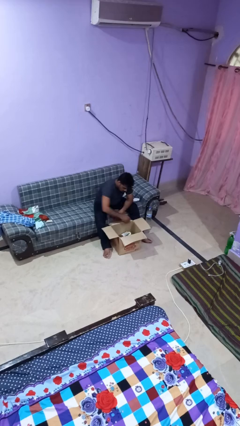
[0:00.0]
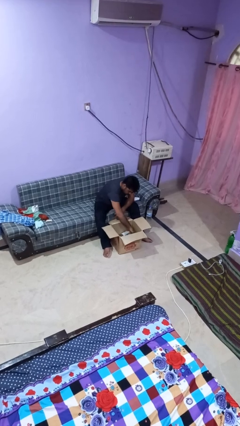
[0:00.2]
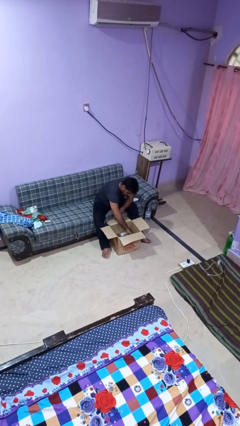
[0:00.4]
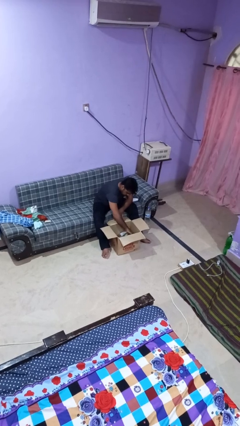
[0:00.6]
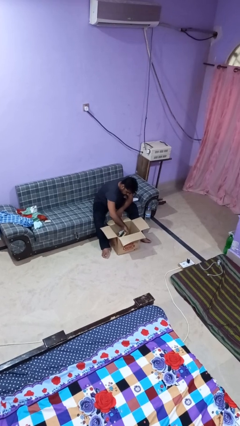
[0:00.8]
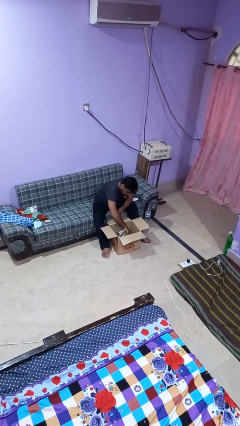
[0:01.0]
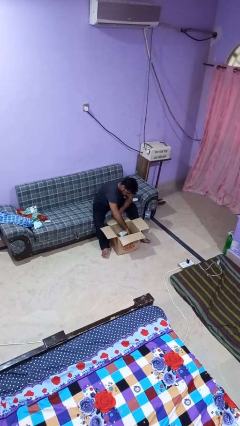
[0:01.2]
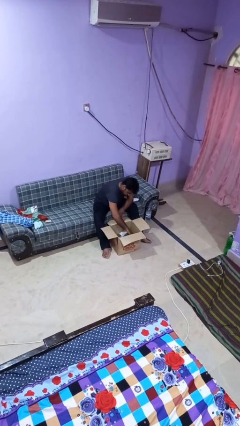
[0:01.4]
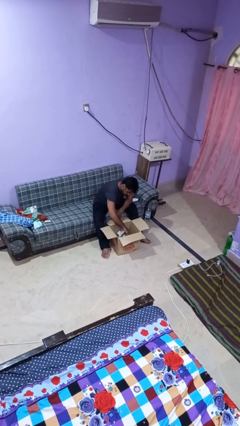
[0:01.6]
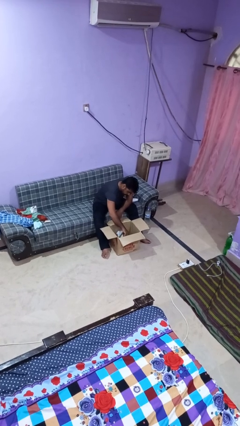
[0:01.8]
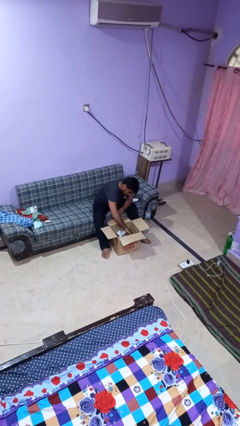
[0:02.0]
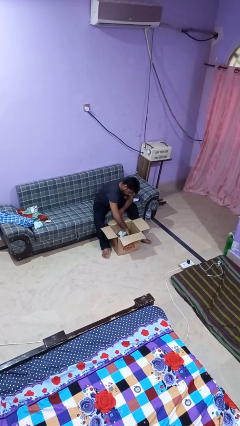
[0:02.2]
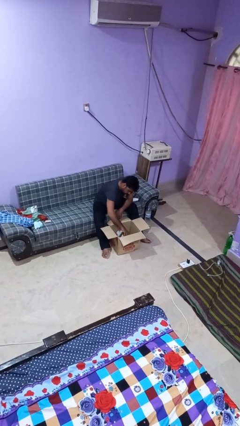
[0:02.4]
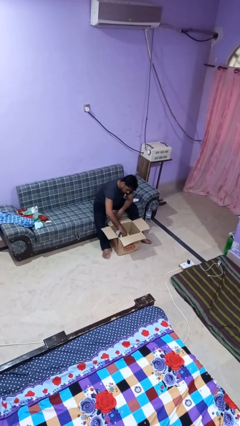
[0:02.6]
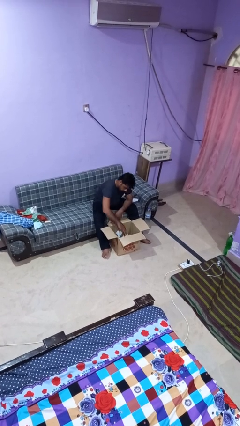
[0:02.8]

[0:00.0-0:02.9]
person searches in box

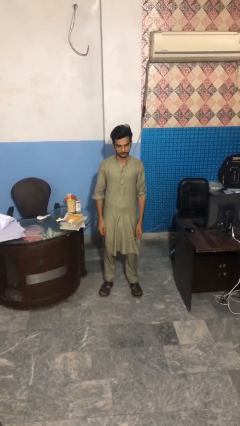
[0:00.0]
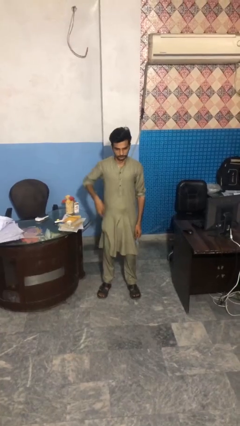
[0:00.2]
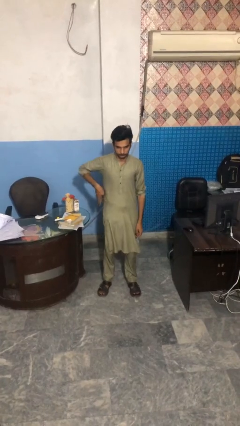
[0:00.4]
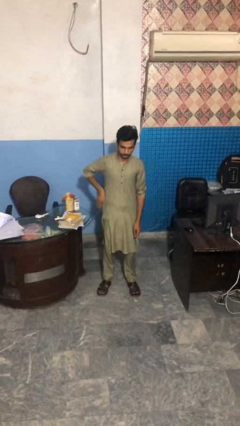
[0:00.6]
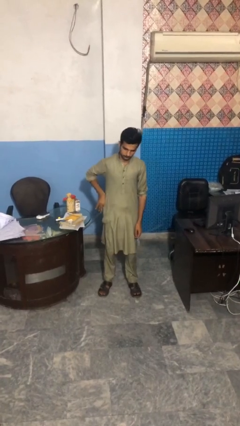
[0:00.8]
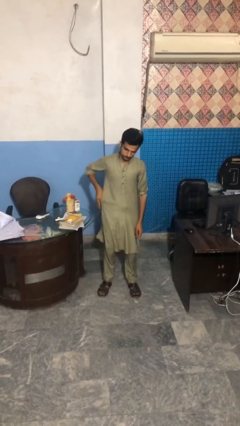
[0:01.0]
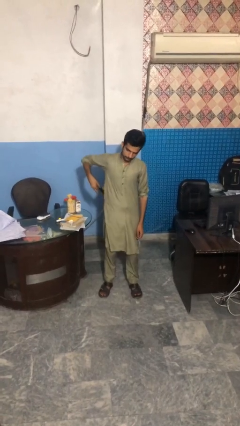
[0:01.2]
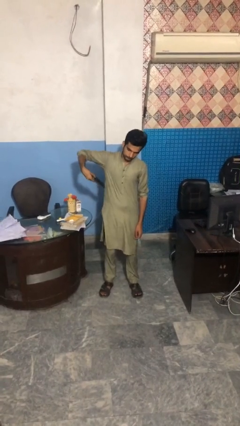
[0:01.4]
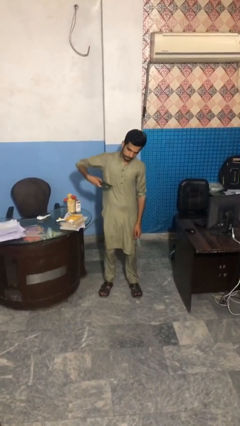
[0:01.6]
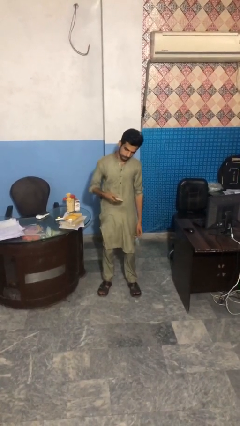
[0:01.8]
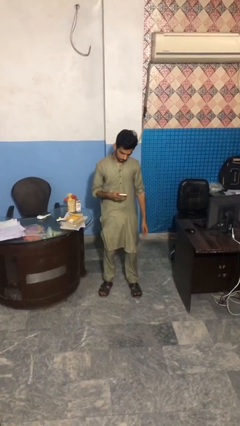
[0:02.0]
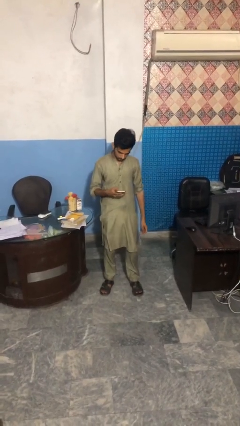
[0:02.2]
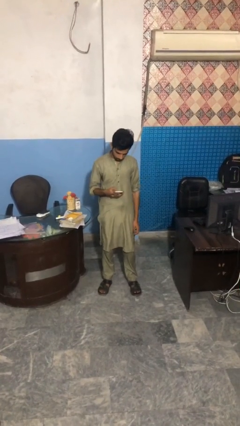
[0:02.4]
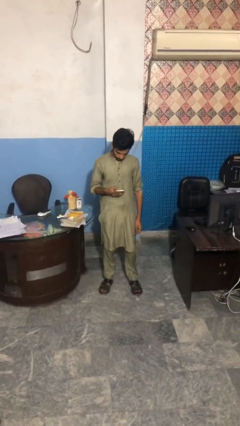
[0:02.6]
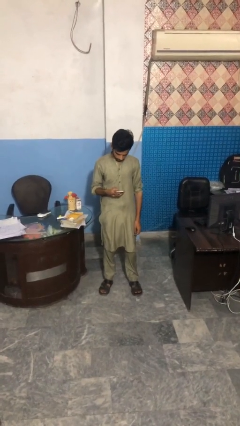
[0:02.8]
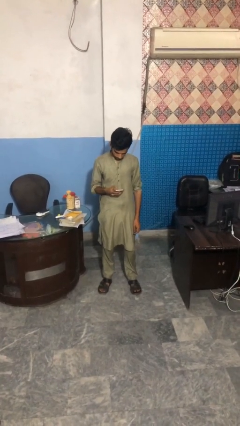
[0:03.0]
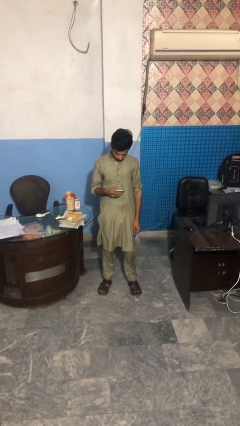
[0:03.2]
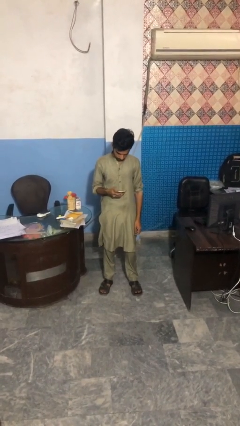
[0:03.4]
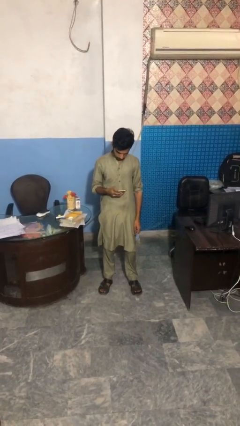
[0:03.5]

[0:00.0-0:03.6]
person takes phone from pocket

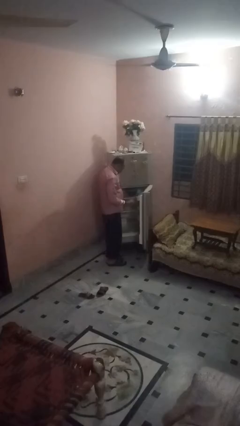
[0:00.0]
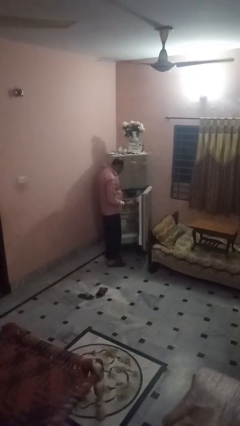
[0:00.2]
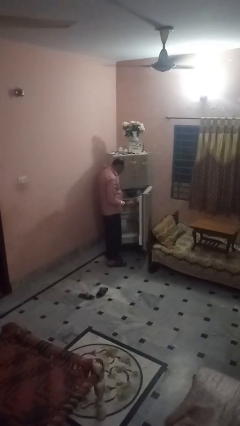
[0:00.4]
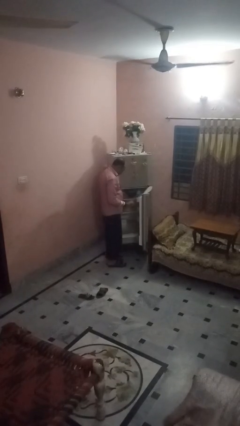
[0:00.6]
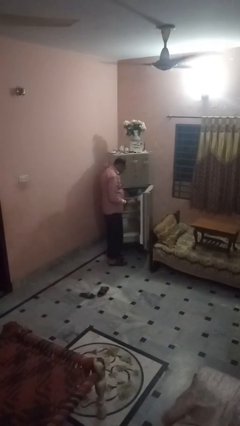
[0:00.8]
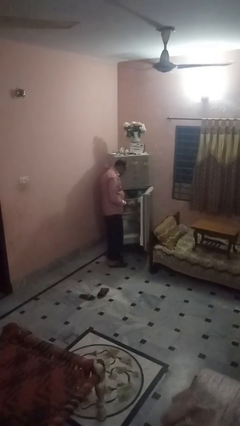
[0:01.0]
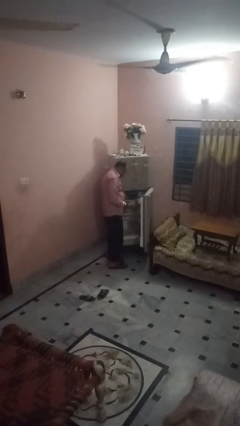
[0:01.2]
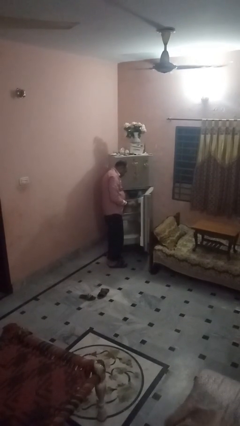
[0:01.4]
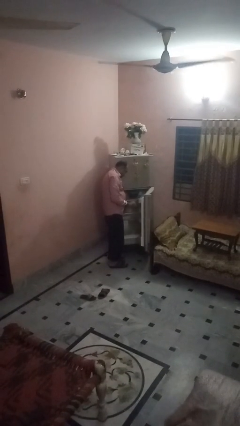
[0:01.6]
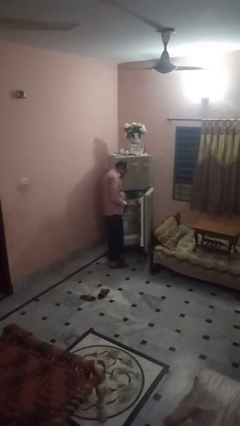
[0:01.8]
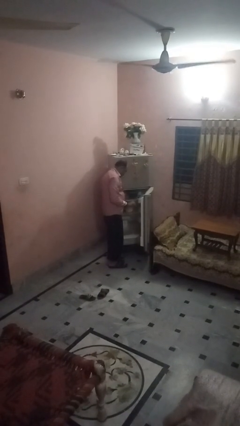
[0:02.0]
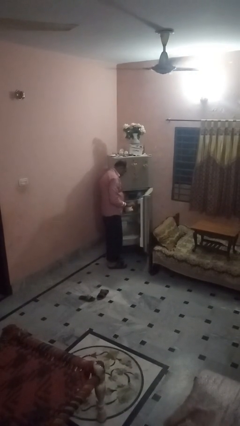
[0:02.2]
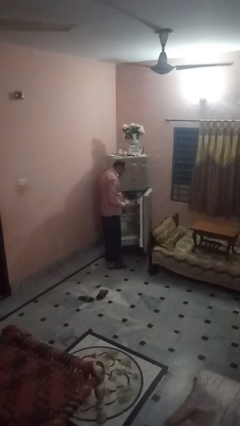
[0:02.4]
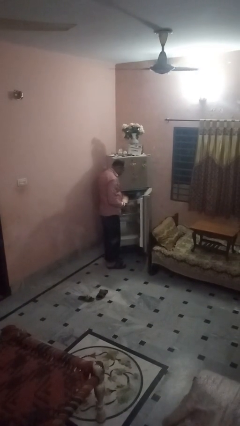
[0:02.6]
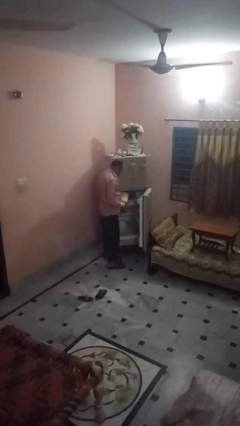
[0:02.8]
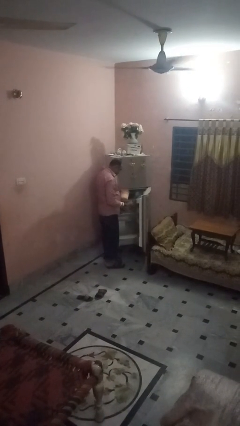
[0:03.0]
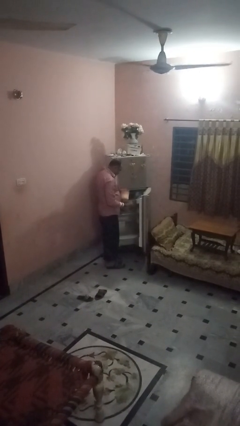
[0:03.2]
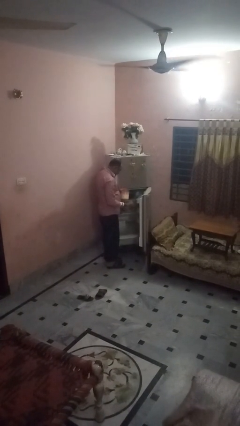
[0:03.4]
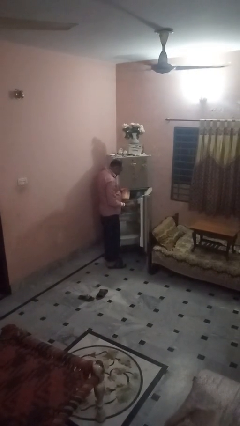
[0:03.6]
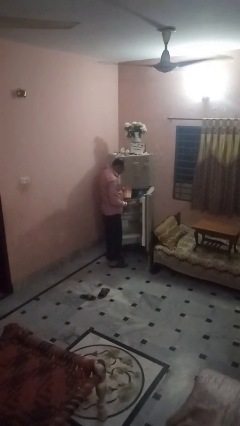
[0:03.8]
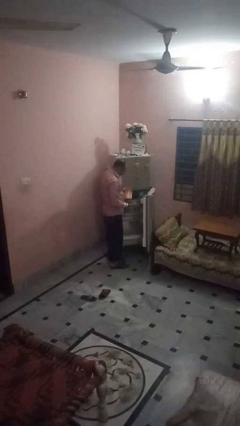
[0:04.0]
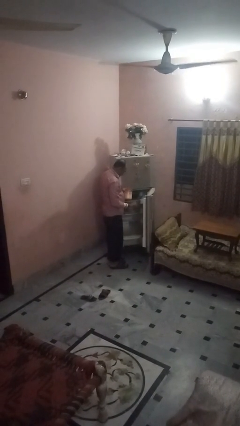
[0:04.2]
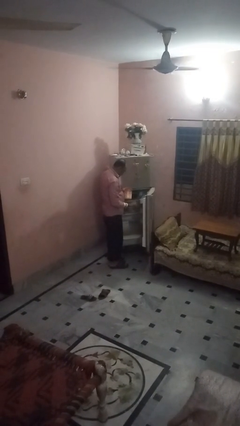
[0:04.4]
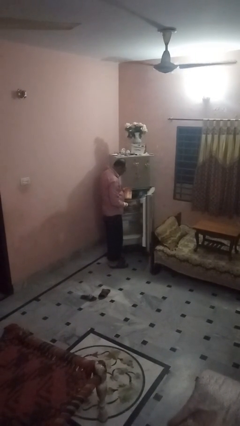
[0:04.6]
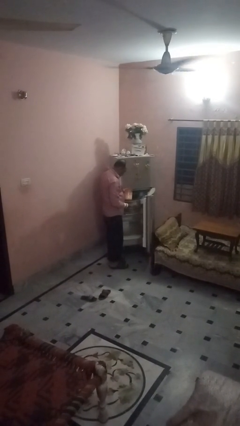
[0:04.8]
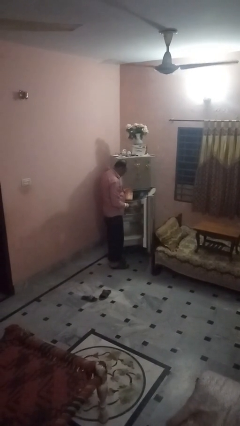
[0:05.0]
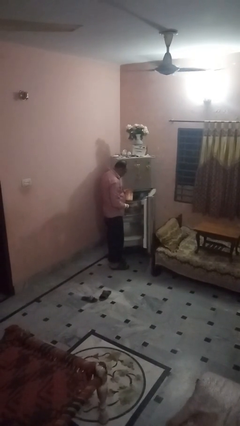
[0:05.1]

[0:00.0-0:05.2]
person puts object into refrigerator

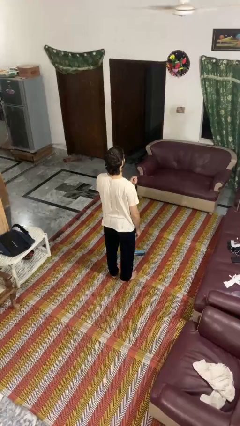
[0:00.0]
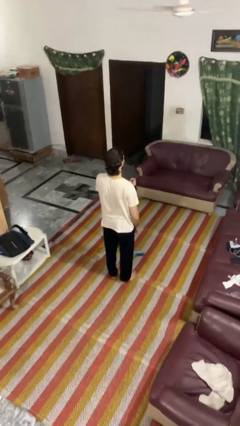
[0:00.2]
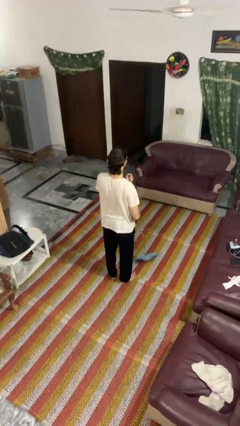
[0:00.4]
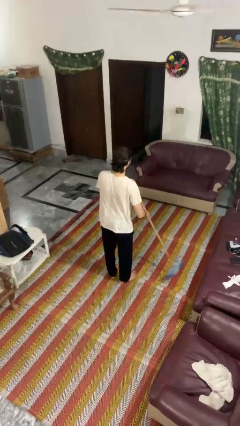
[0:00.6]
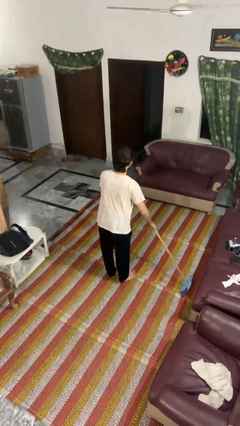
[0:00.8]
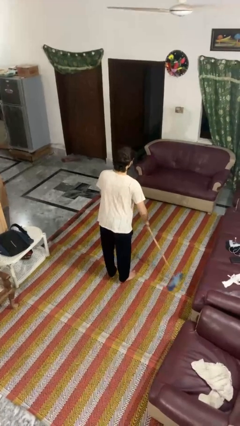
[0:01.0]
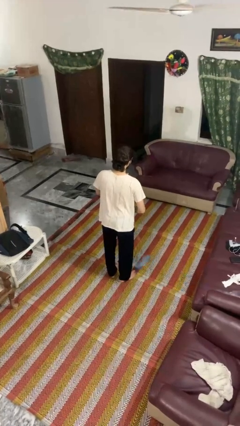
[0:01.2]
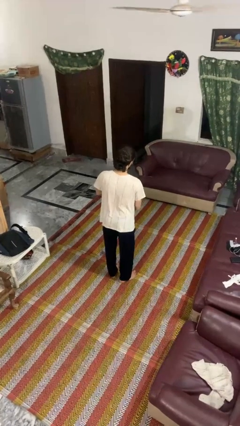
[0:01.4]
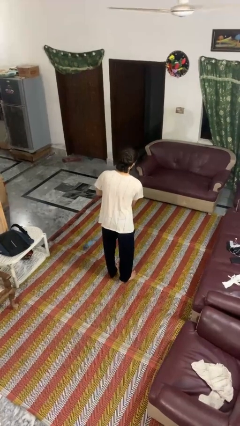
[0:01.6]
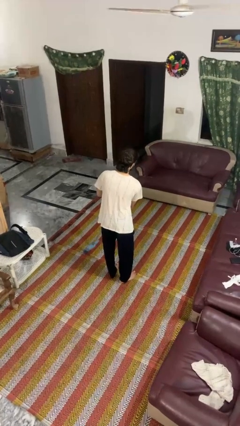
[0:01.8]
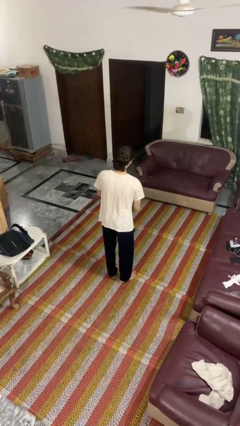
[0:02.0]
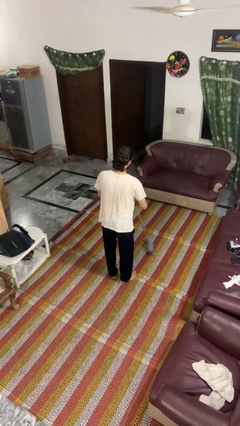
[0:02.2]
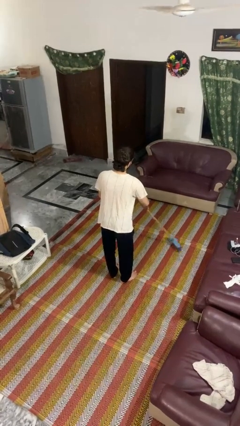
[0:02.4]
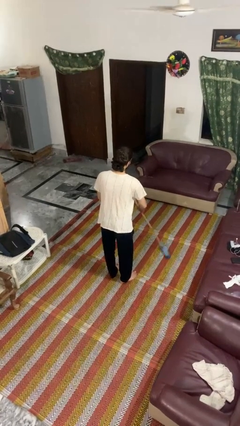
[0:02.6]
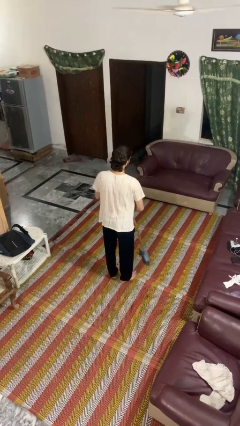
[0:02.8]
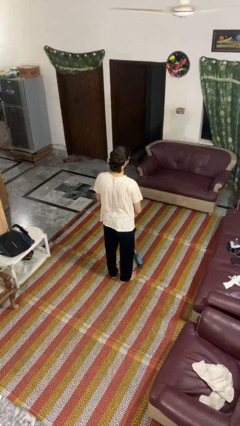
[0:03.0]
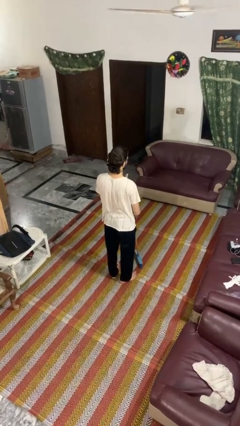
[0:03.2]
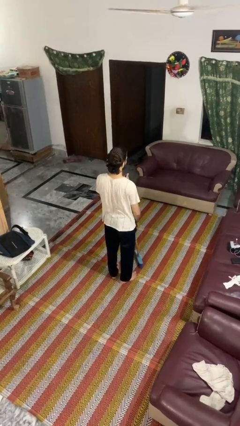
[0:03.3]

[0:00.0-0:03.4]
person sweeps floor

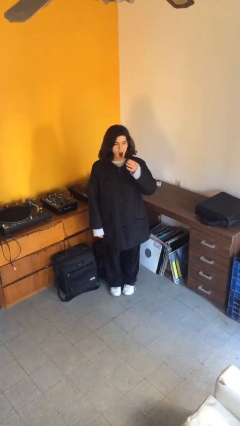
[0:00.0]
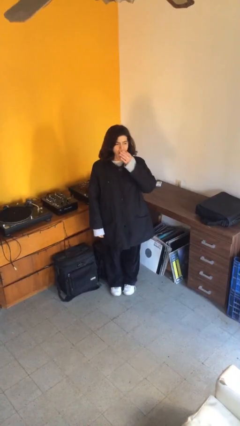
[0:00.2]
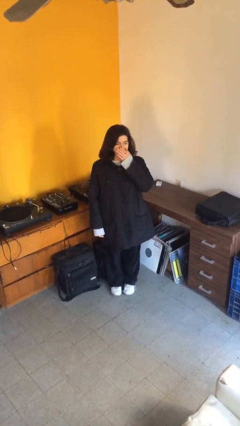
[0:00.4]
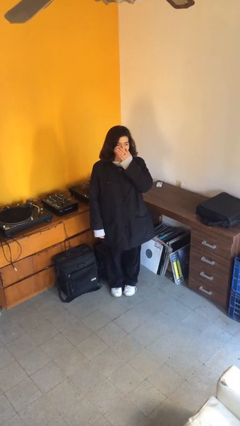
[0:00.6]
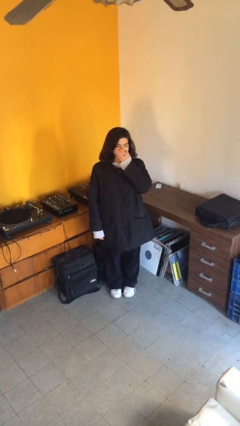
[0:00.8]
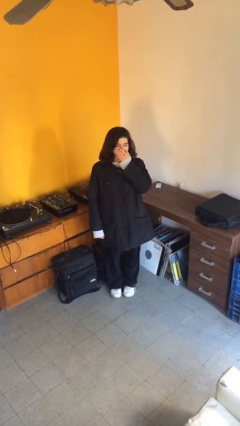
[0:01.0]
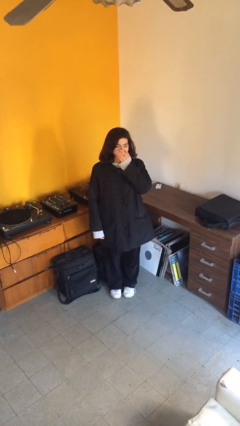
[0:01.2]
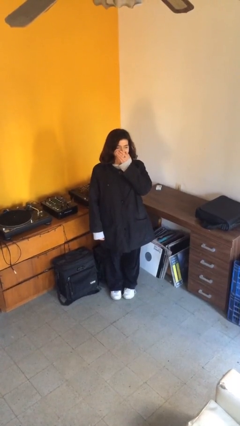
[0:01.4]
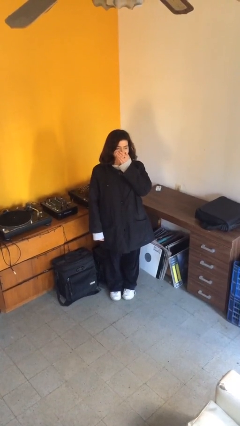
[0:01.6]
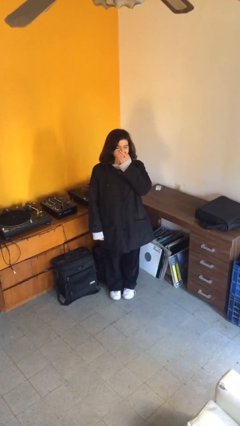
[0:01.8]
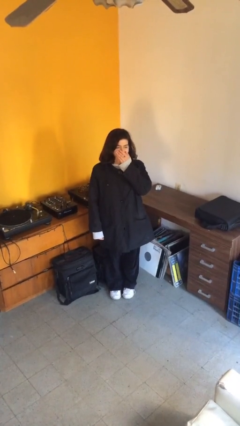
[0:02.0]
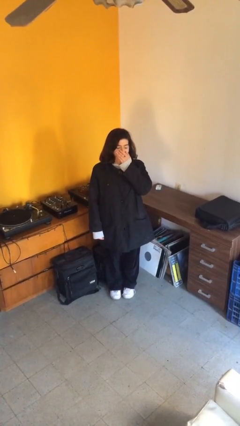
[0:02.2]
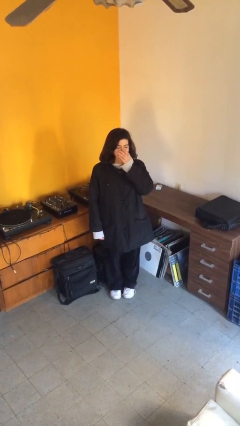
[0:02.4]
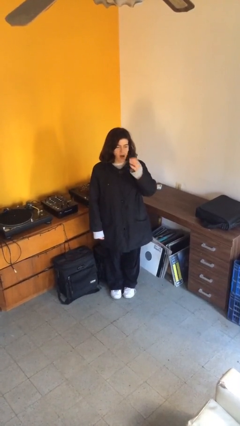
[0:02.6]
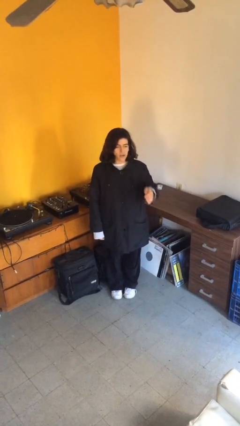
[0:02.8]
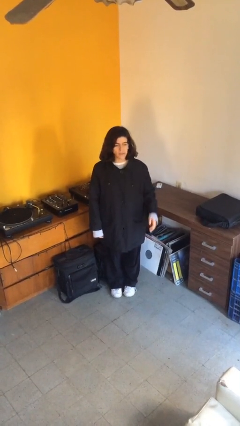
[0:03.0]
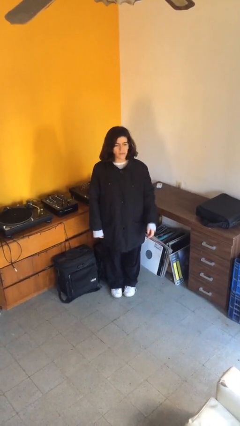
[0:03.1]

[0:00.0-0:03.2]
person yawns
